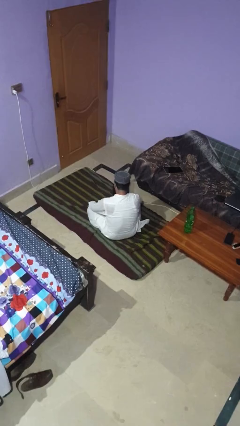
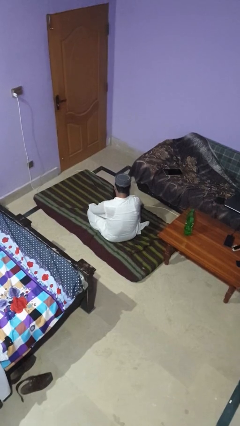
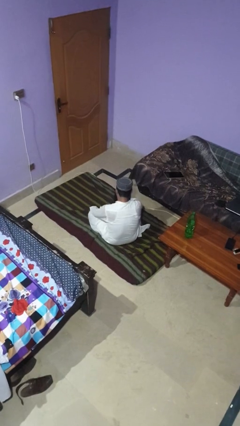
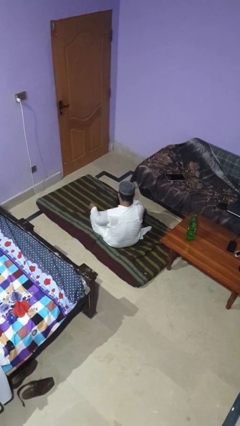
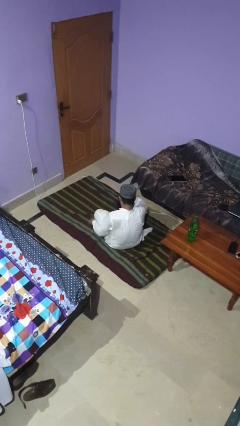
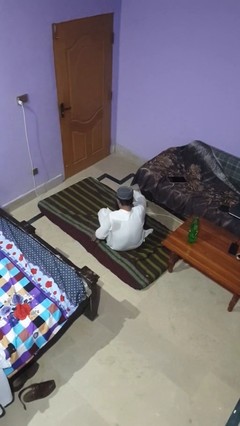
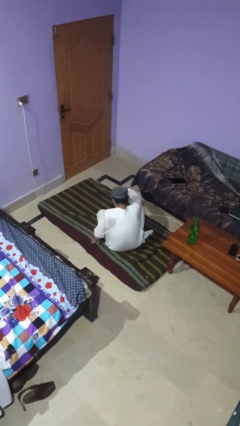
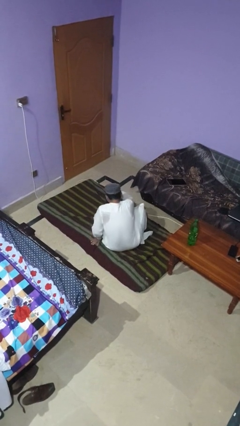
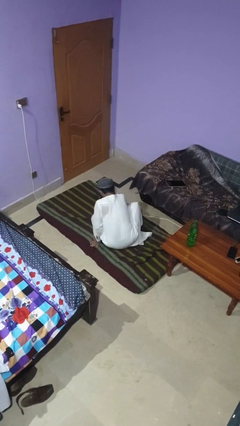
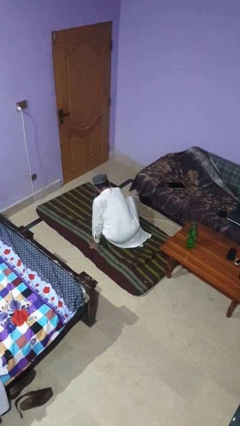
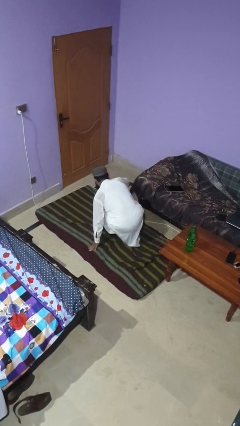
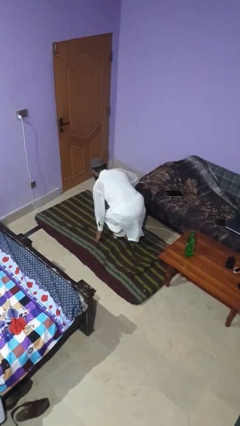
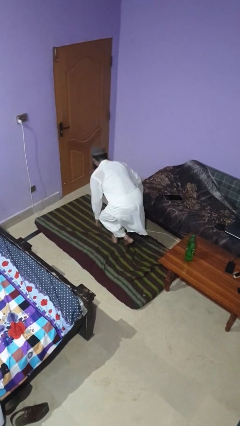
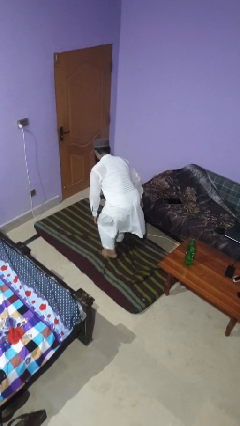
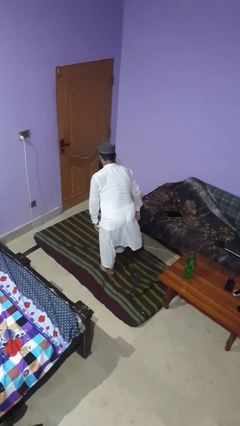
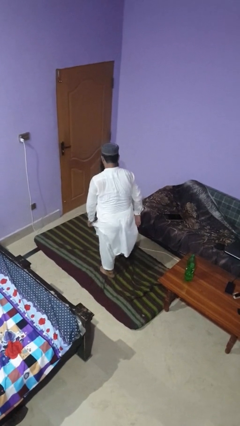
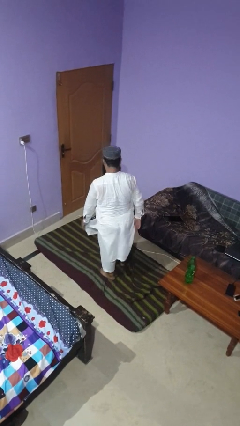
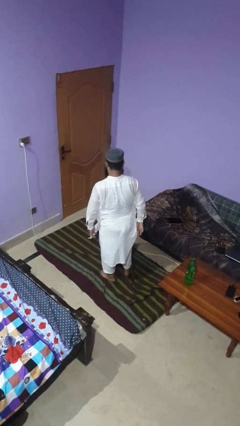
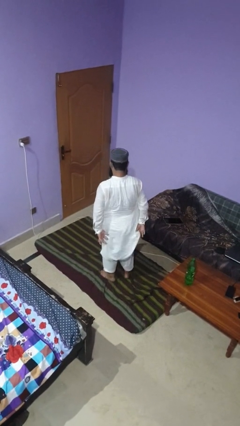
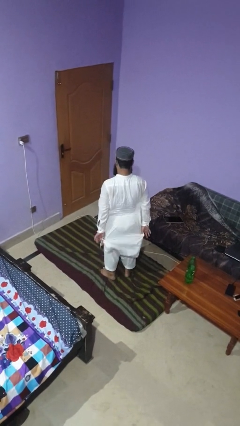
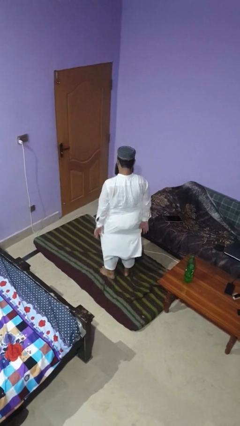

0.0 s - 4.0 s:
person stands up from floor

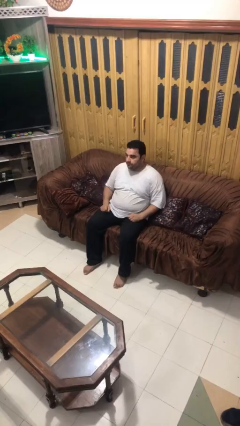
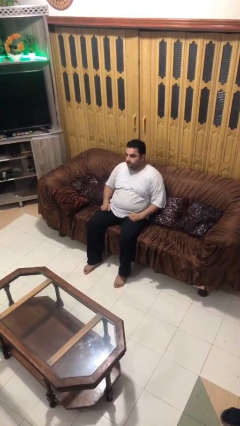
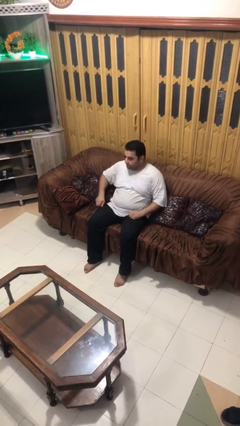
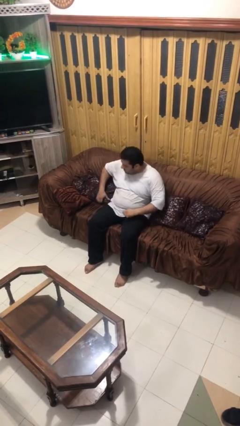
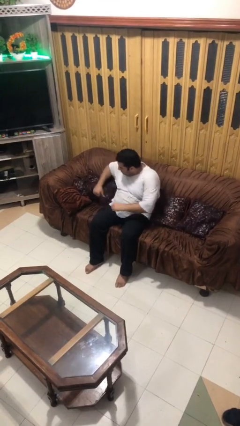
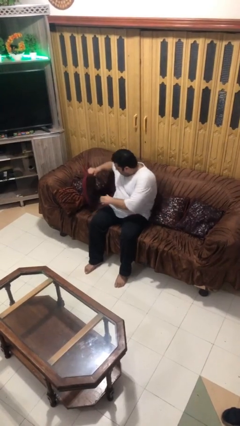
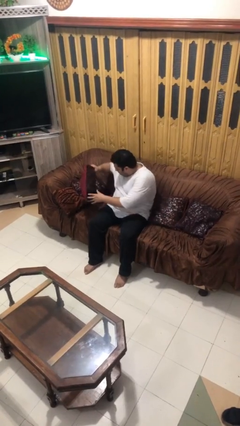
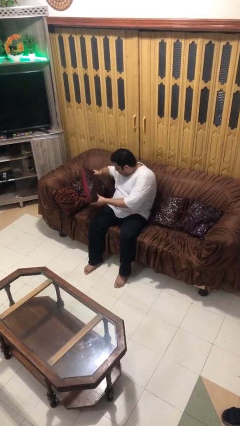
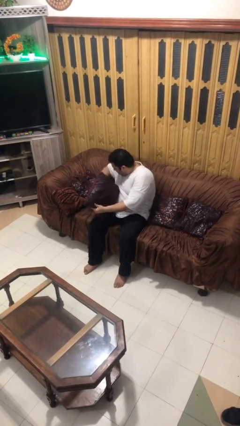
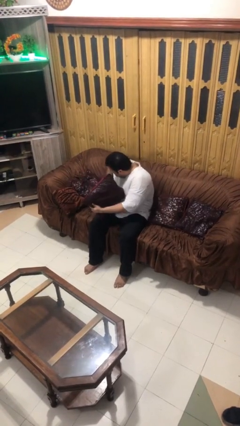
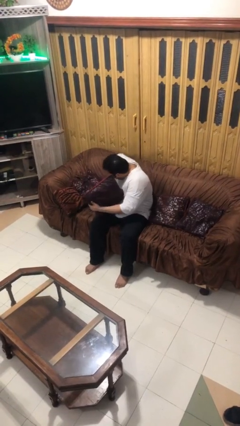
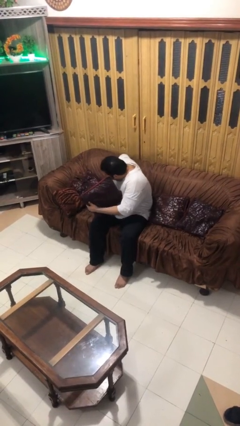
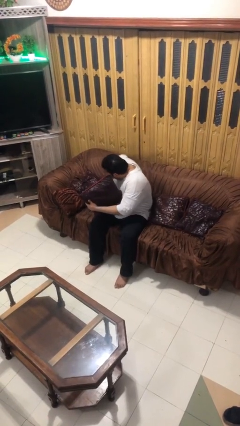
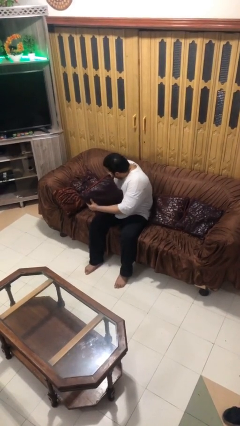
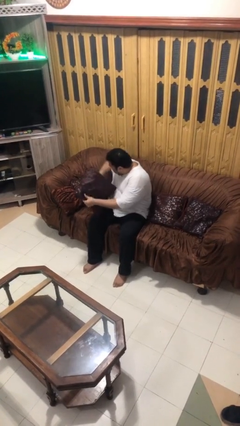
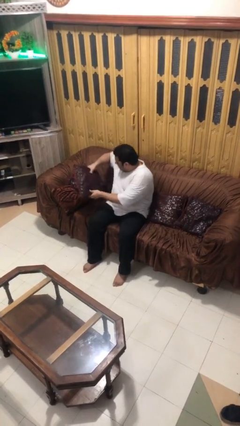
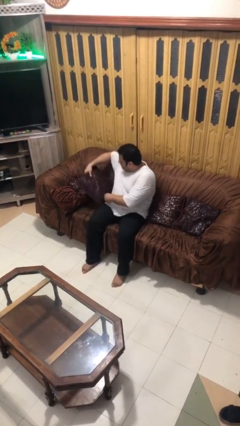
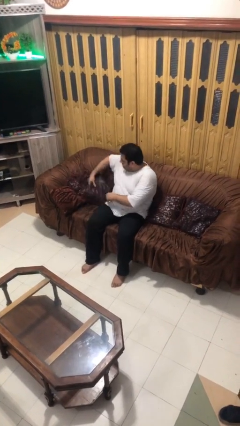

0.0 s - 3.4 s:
person searches in couch

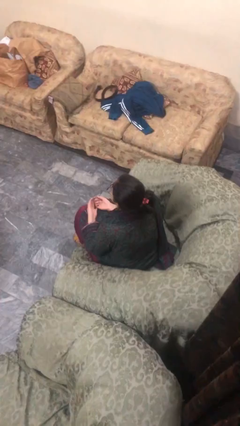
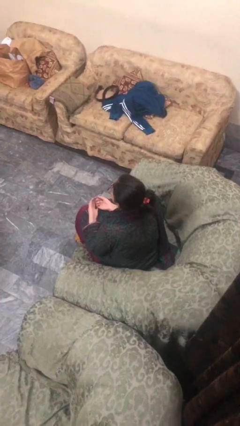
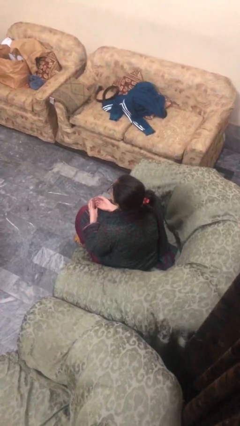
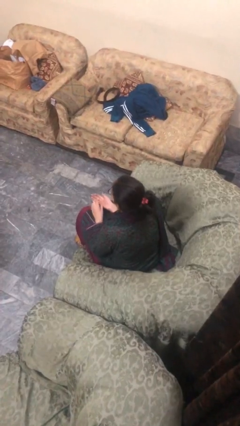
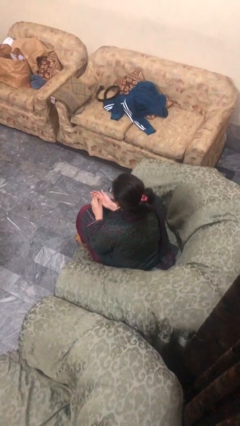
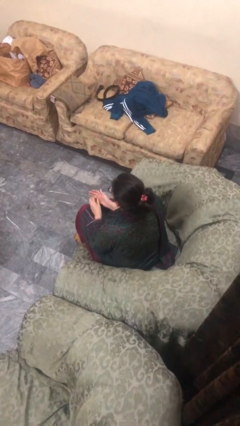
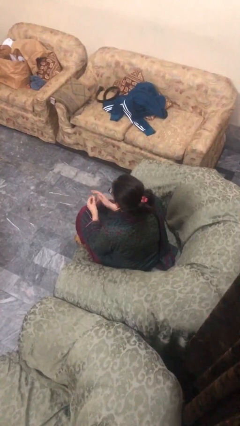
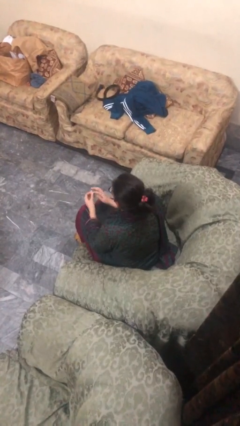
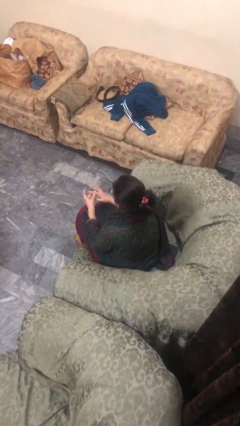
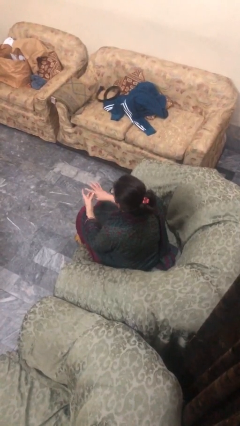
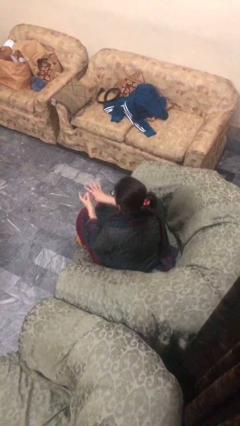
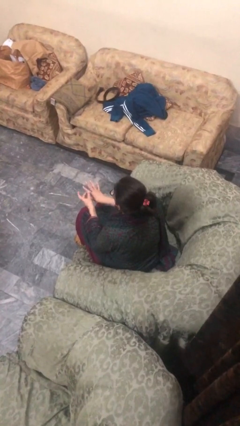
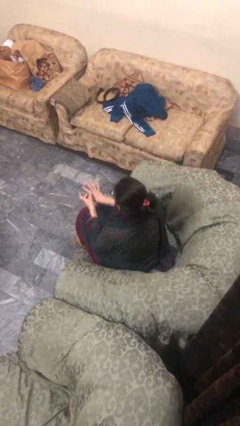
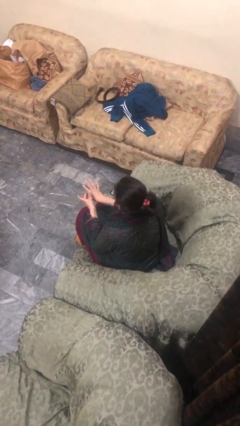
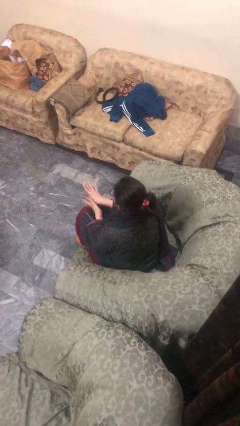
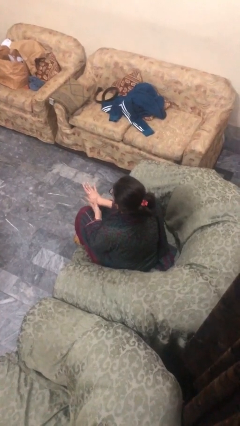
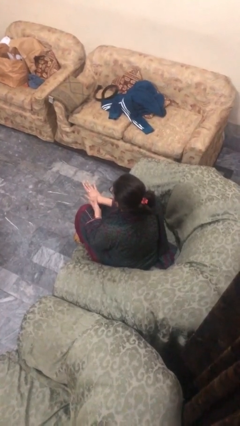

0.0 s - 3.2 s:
person puts on ring

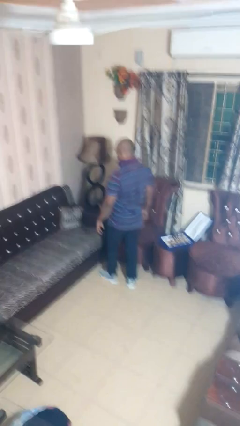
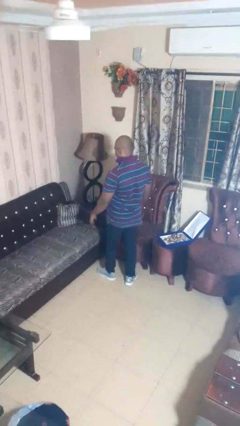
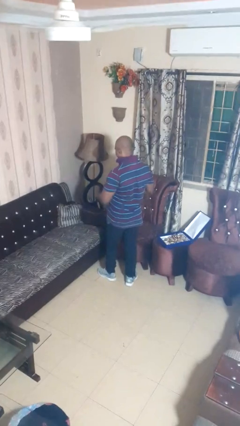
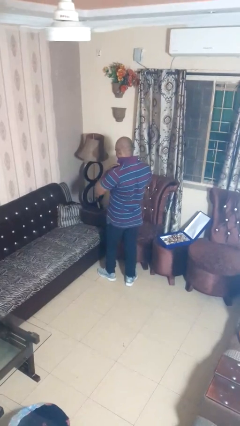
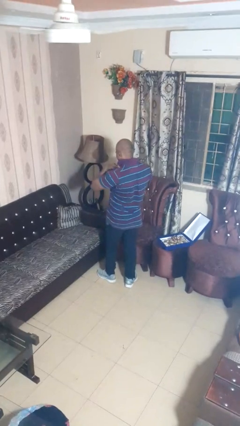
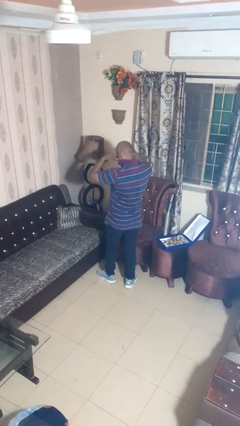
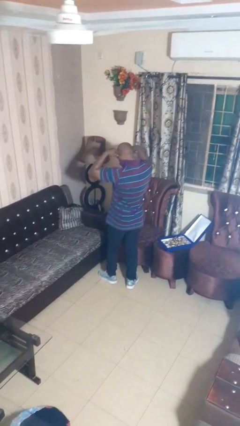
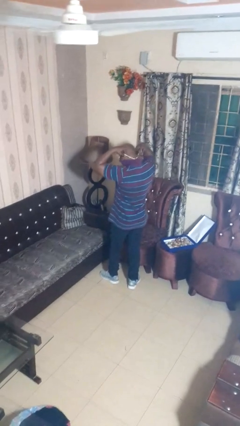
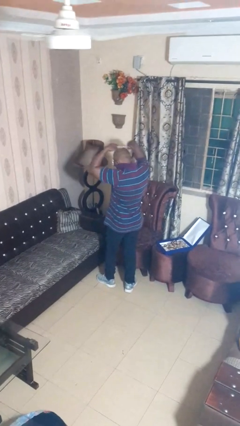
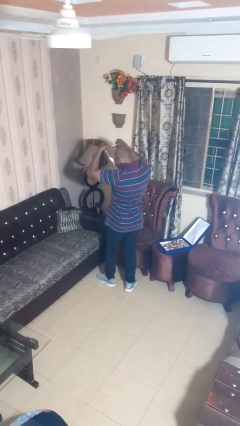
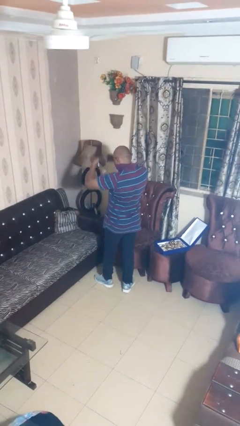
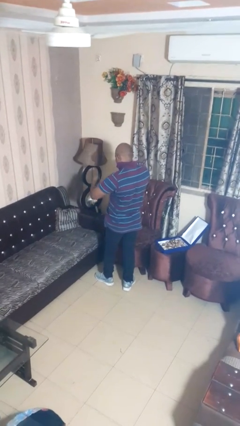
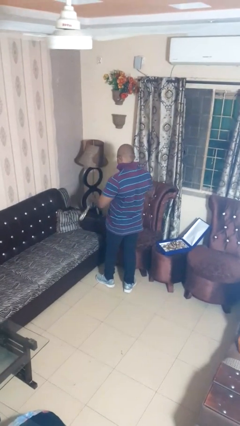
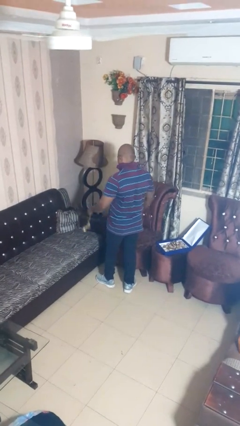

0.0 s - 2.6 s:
person takes off necklace

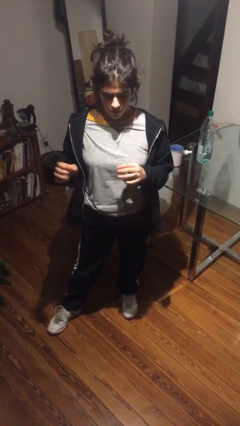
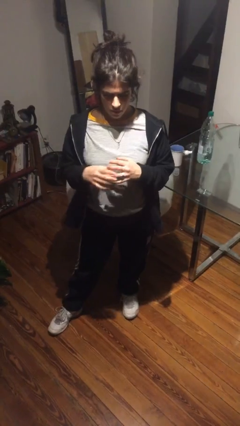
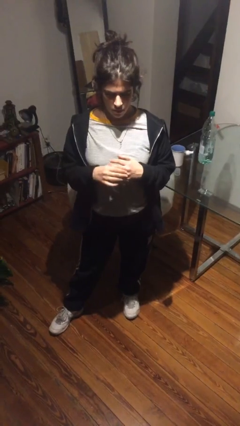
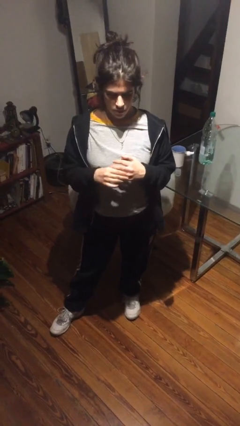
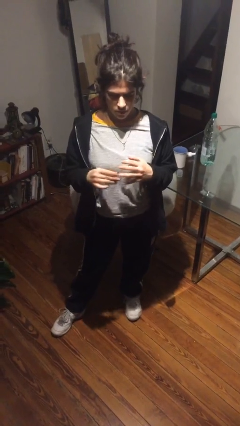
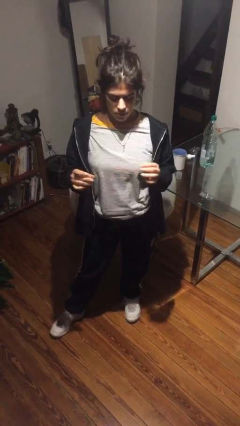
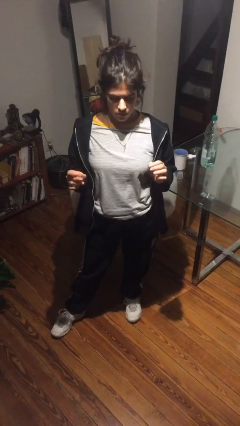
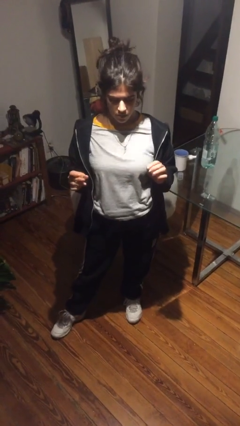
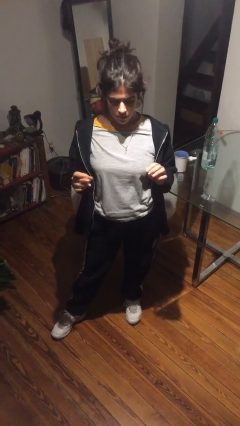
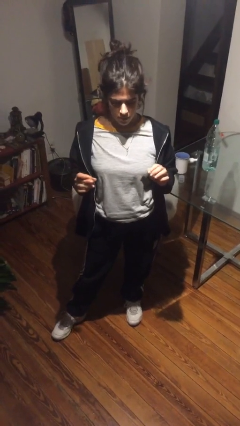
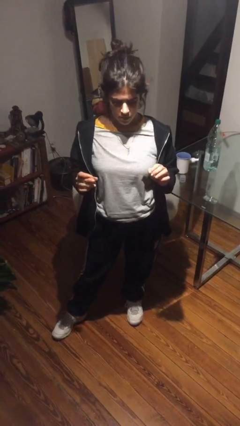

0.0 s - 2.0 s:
person takes off ring

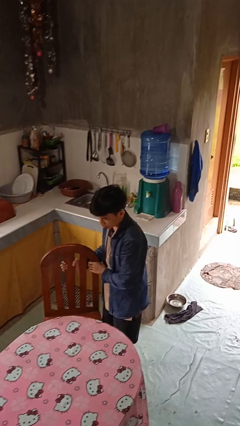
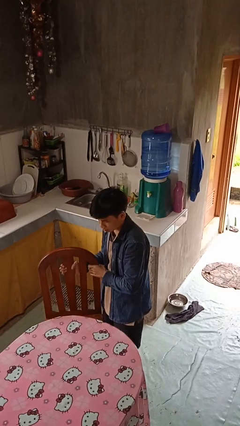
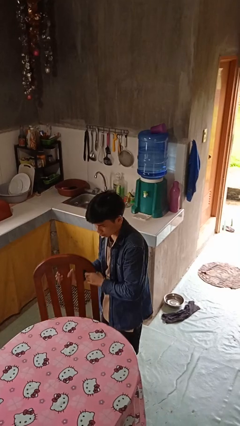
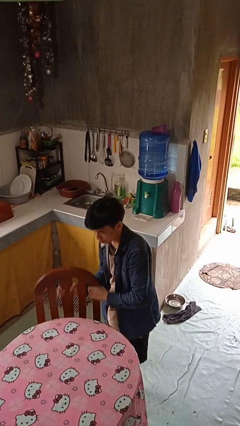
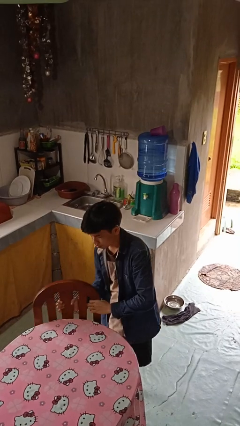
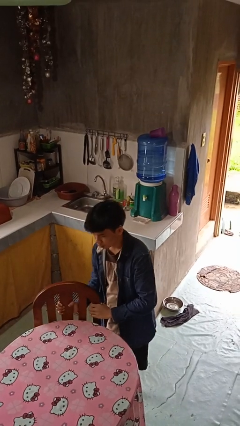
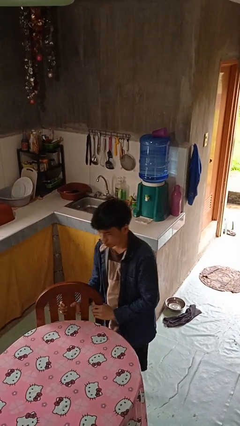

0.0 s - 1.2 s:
person pushes in chair

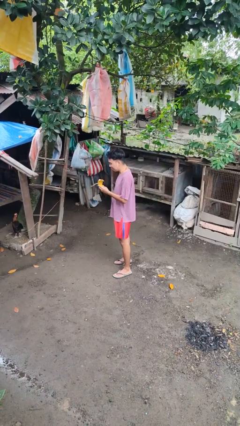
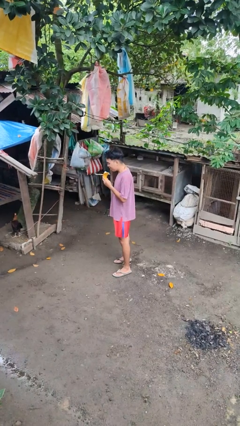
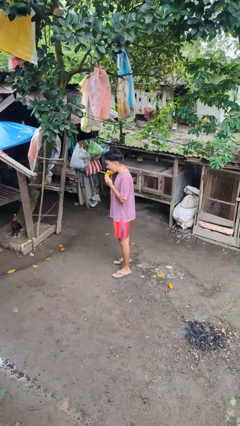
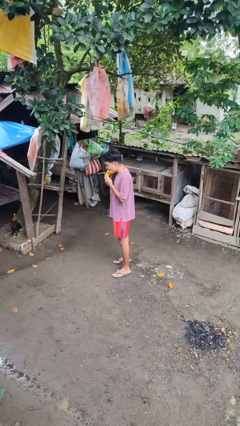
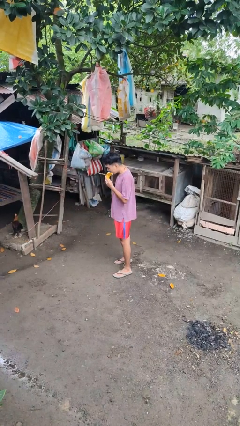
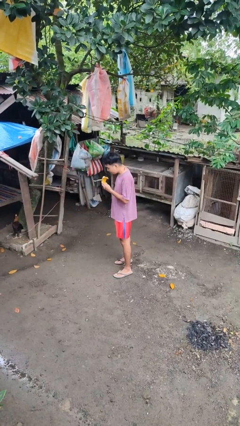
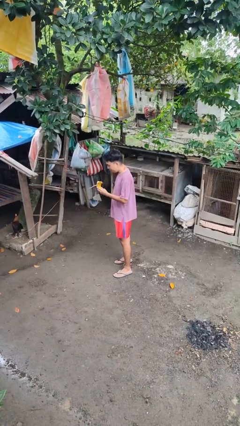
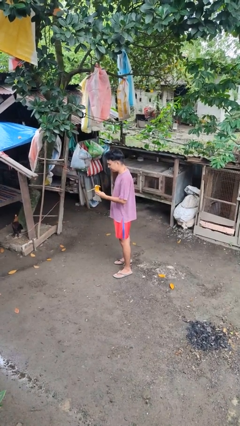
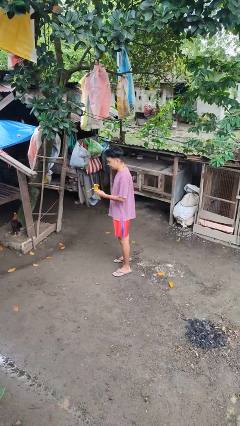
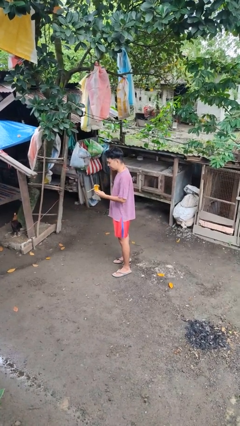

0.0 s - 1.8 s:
person eats banana
